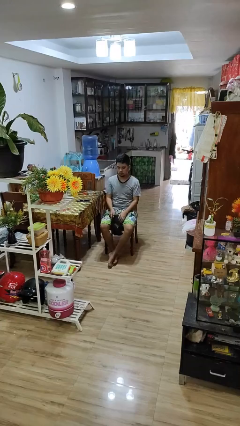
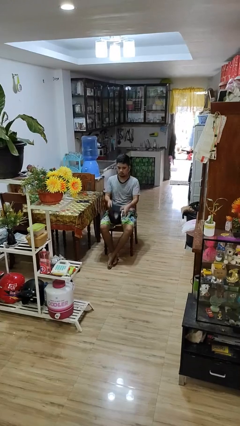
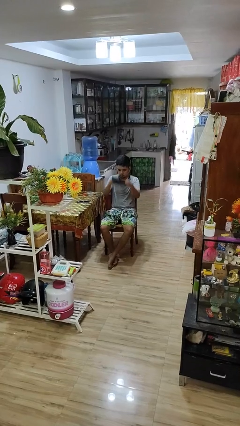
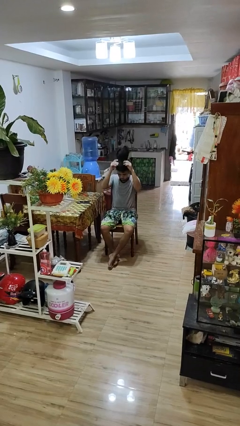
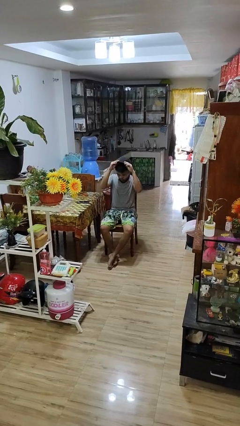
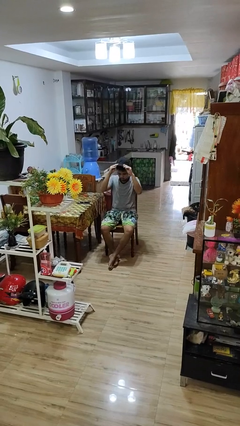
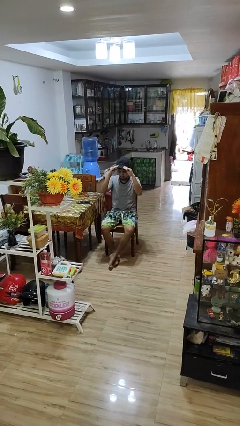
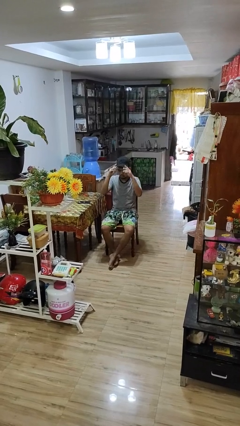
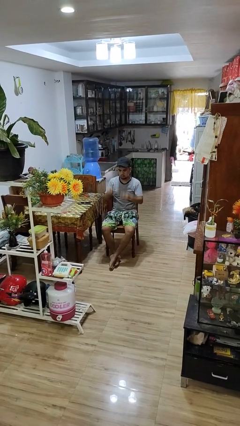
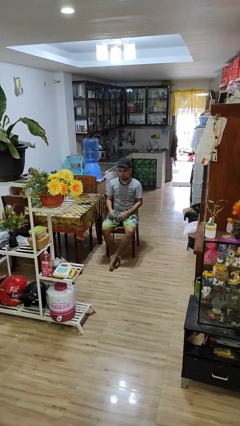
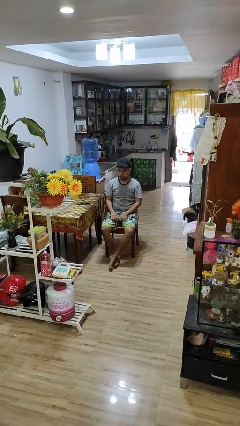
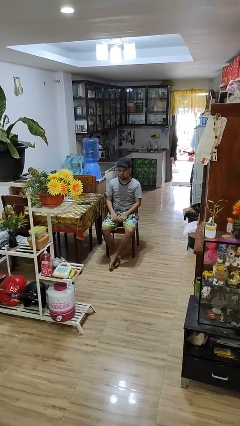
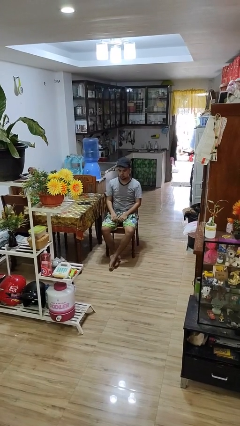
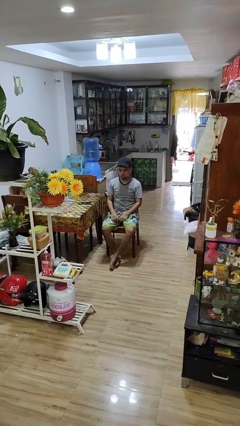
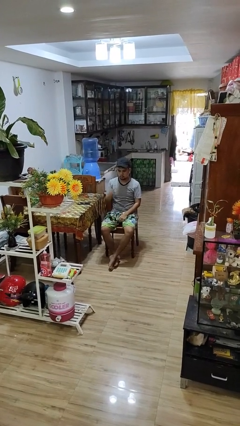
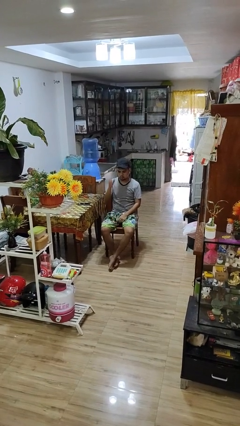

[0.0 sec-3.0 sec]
person puts on hat

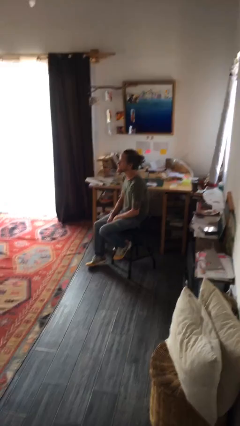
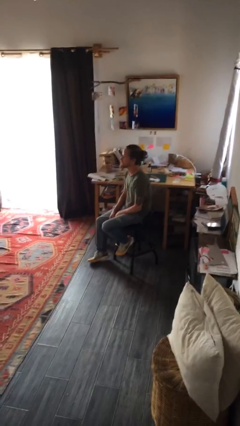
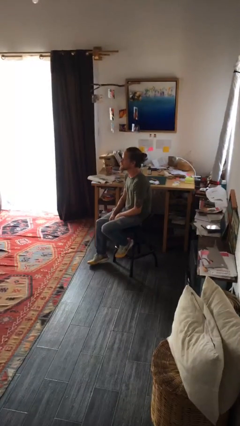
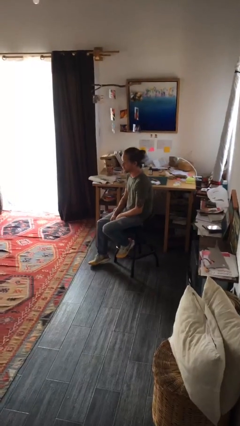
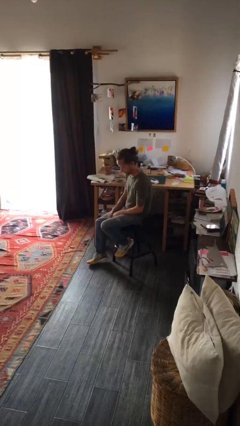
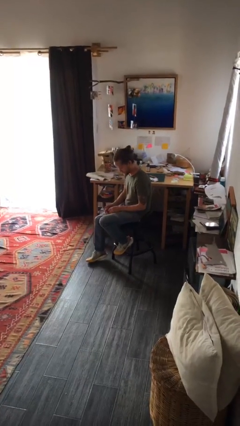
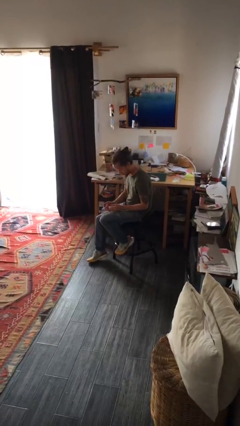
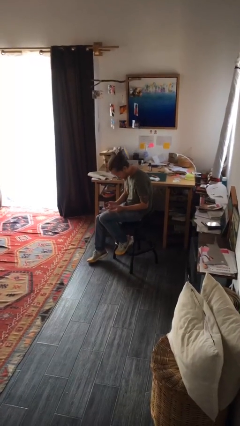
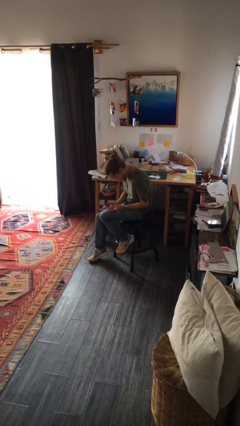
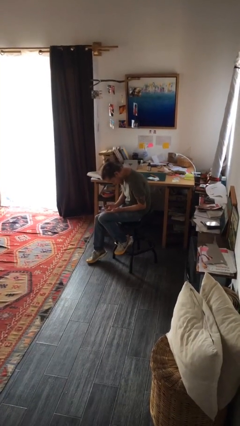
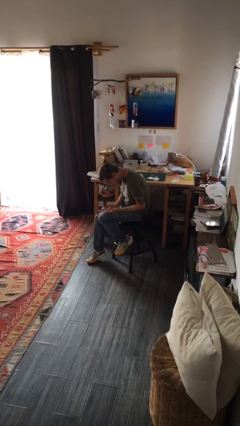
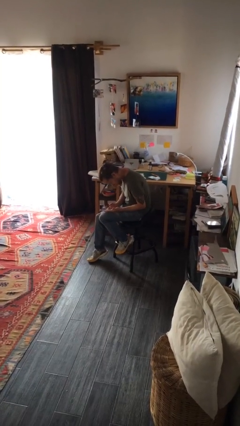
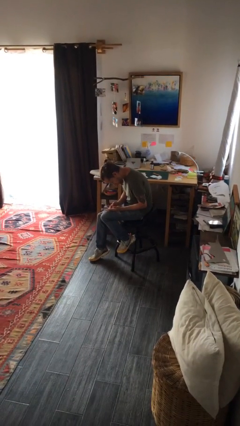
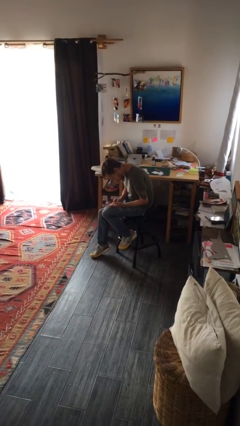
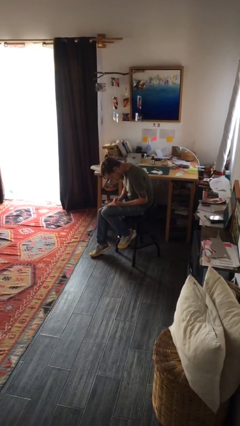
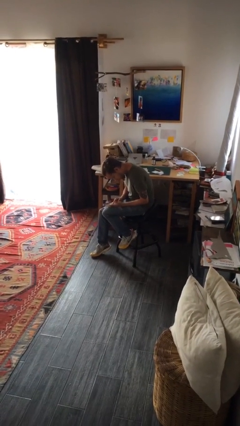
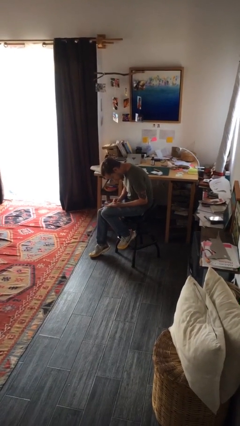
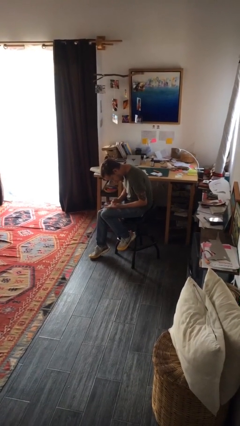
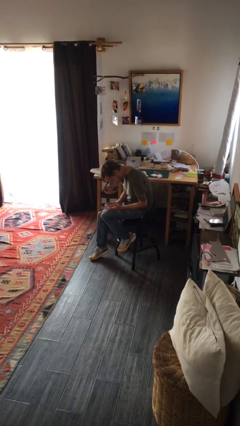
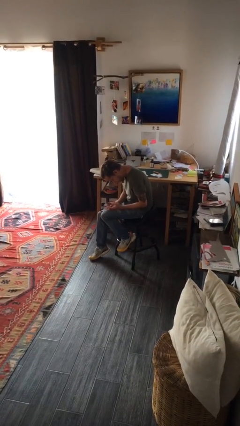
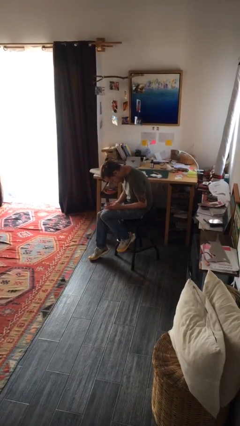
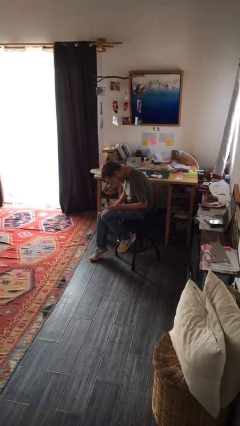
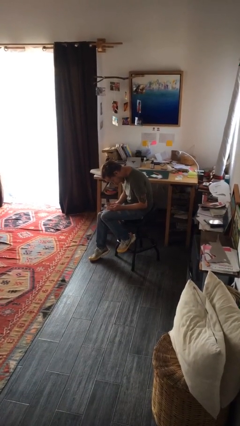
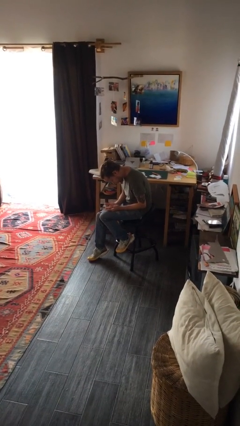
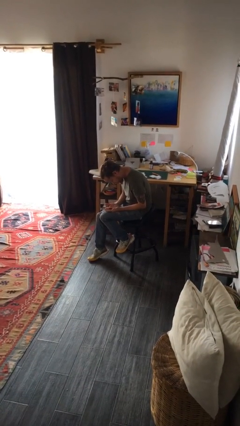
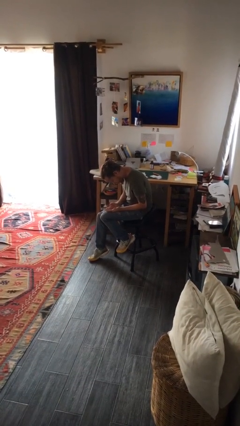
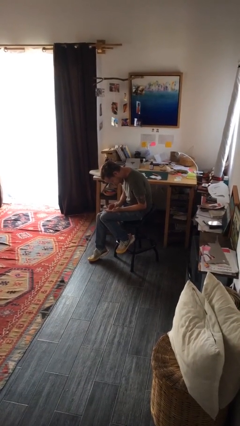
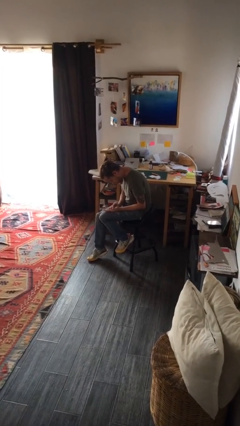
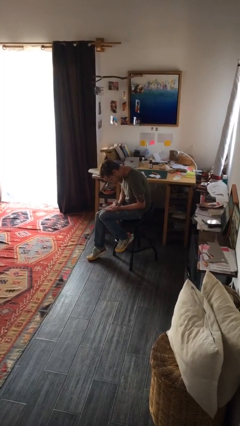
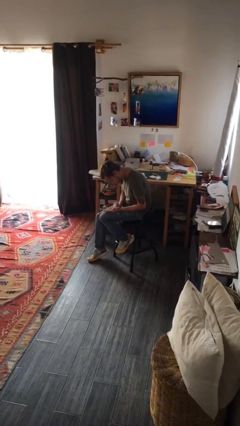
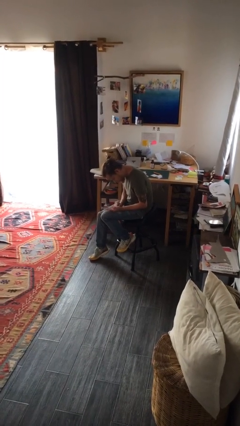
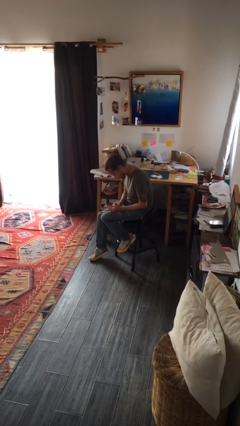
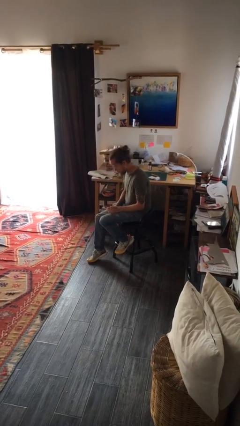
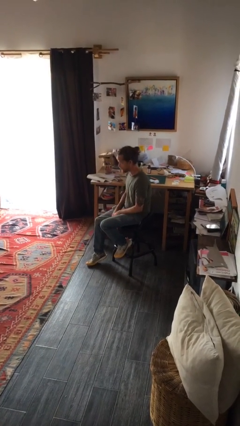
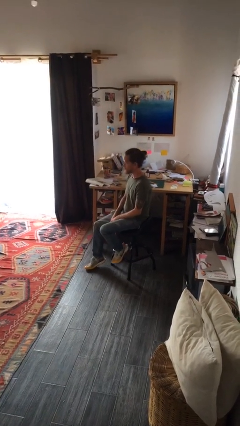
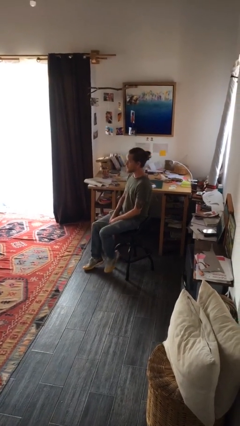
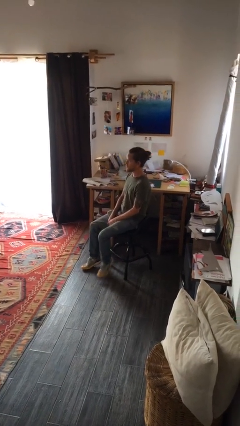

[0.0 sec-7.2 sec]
person looks at hands in lap

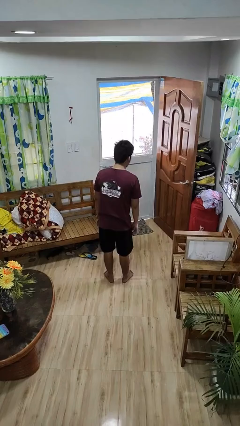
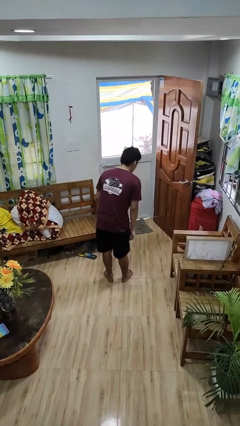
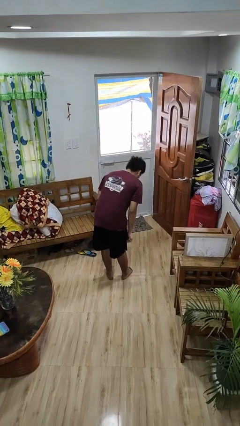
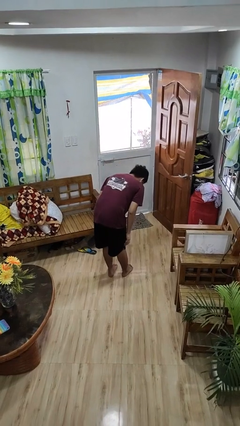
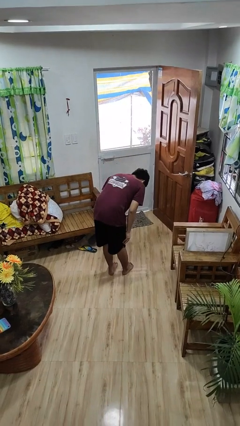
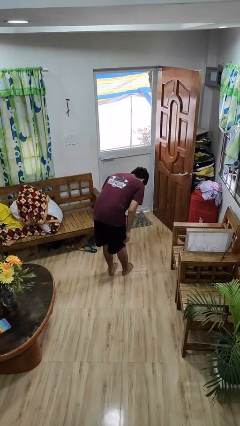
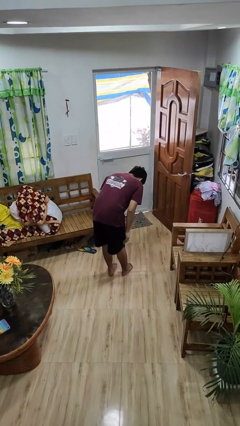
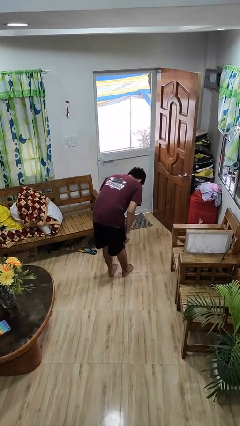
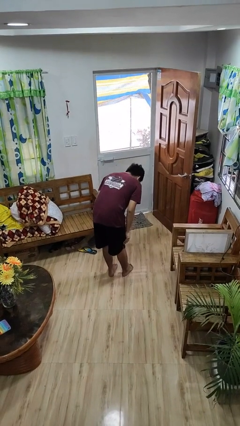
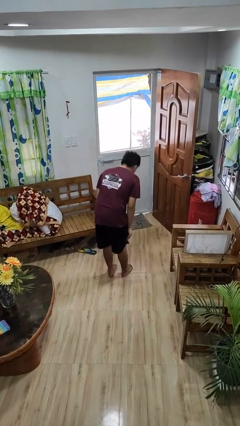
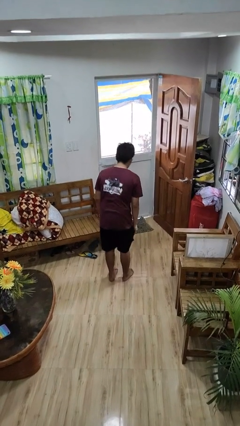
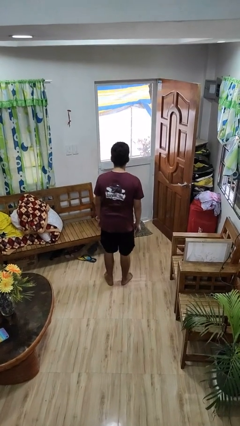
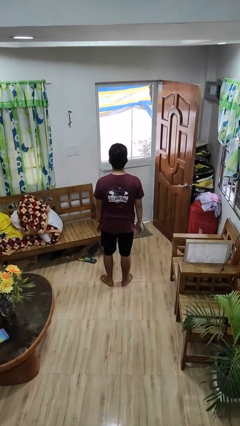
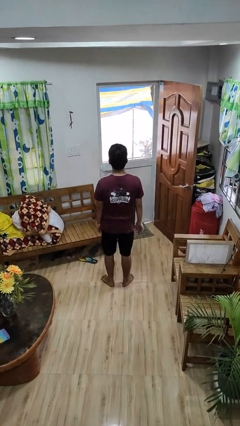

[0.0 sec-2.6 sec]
person bows

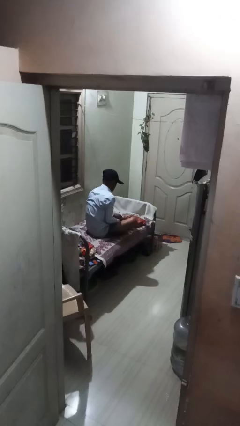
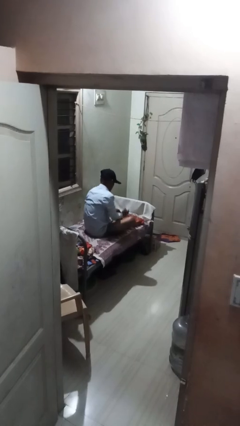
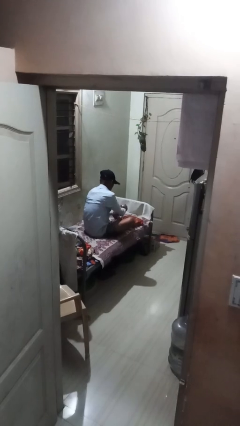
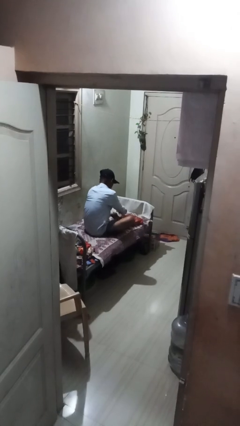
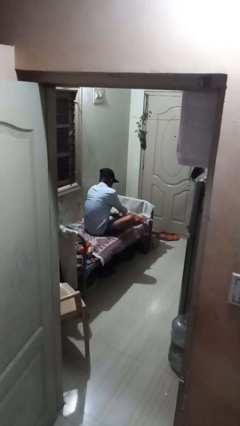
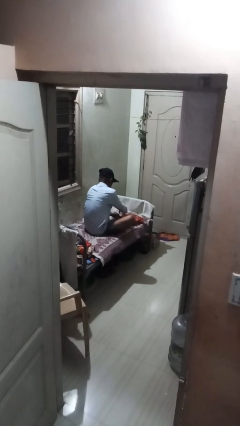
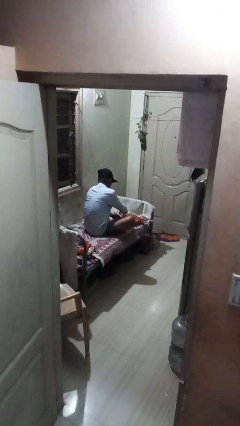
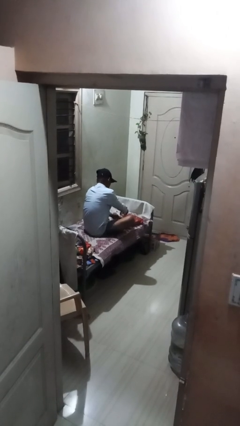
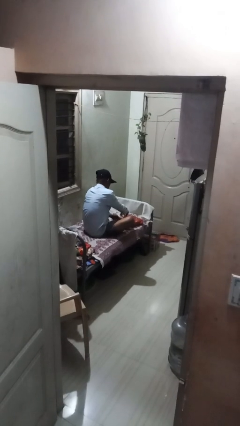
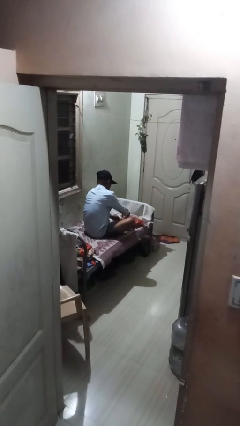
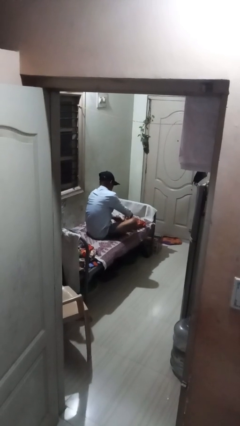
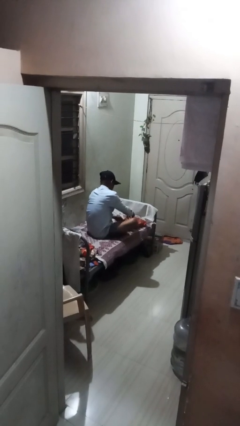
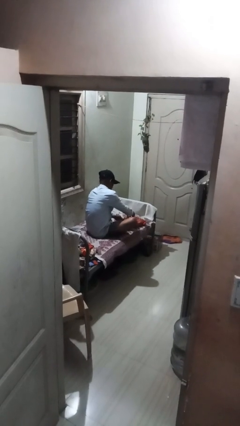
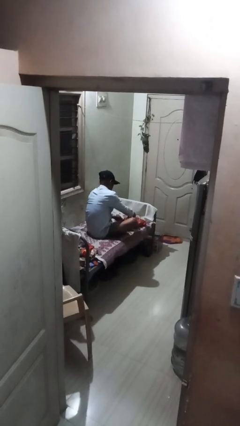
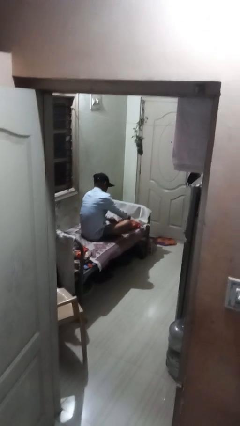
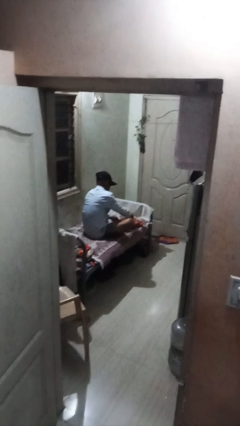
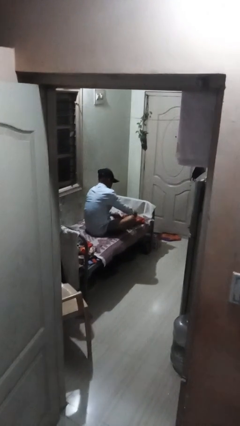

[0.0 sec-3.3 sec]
person wraps box

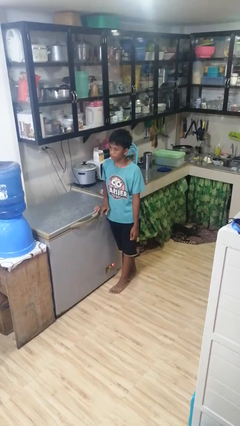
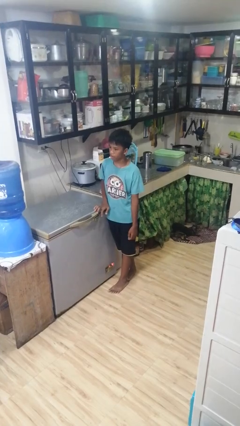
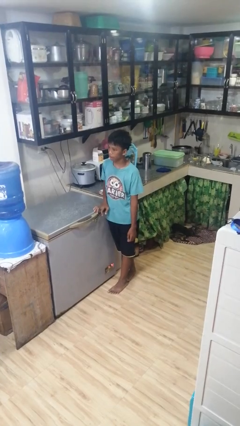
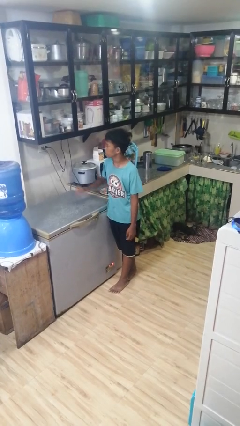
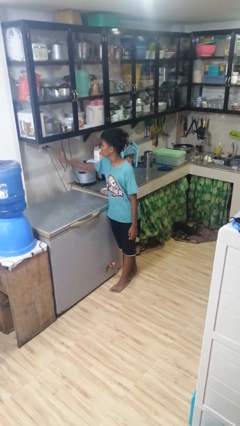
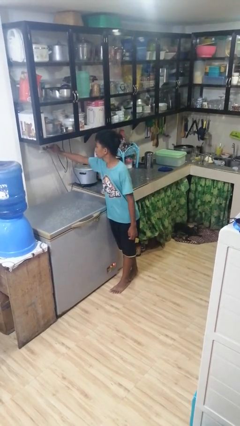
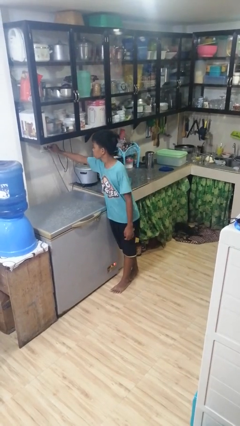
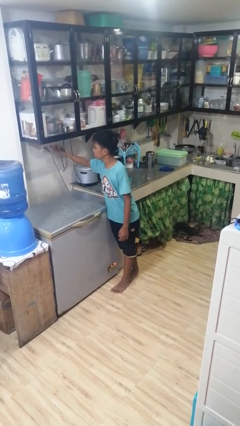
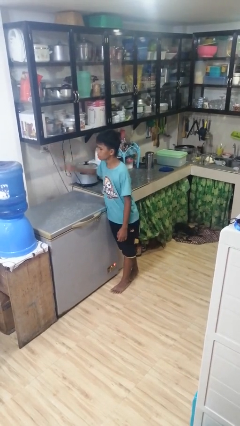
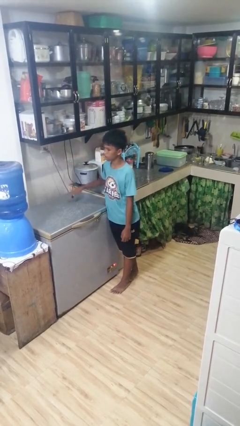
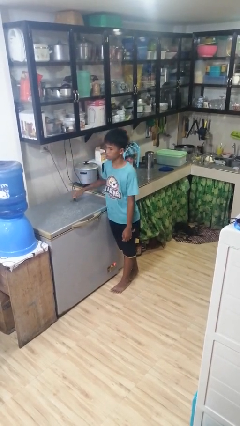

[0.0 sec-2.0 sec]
person unplugs from electrical socket
